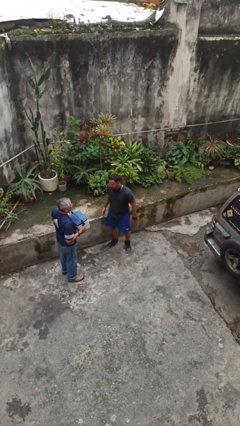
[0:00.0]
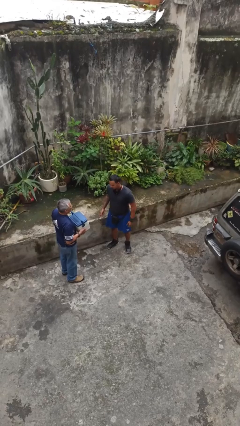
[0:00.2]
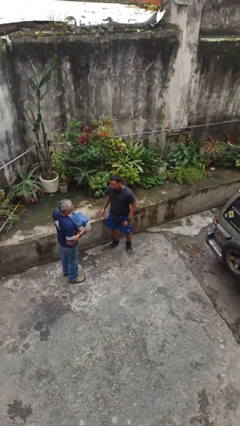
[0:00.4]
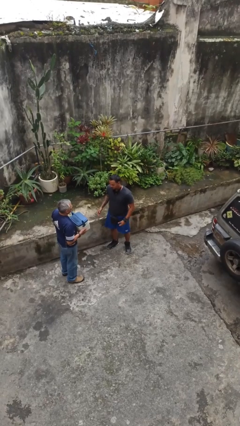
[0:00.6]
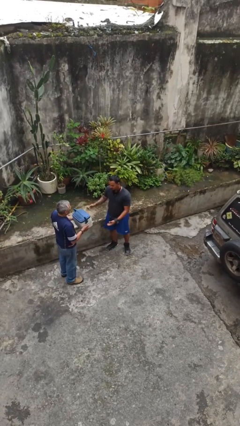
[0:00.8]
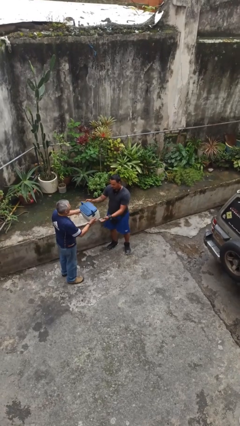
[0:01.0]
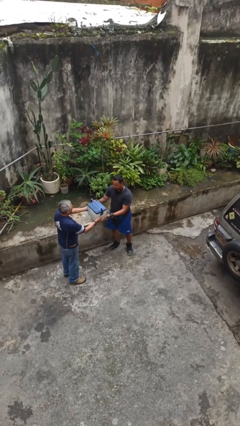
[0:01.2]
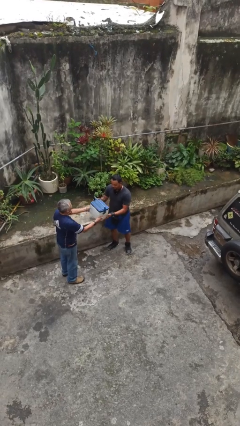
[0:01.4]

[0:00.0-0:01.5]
person transfers object to person

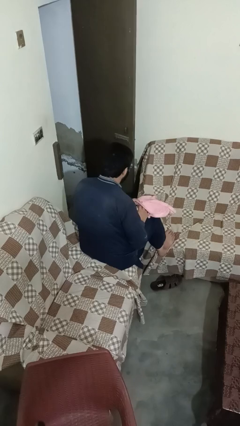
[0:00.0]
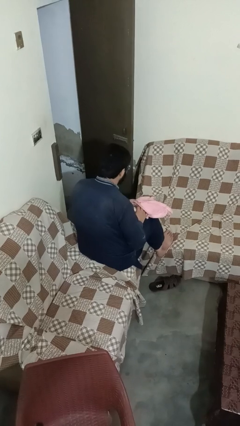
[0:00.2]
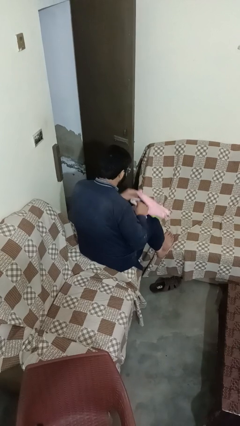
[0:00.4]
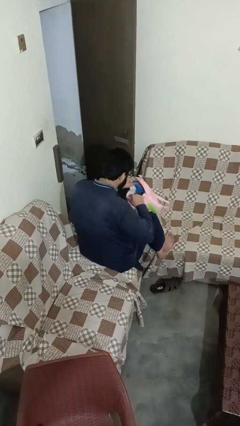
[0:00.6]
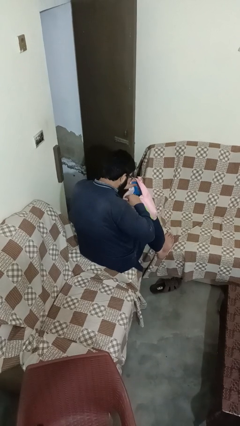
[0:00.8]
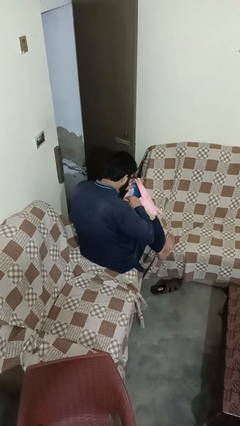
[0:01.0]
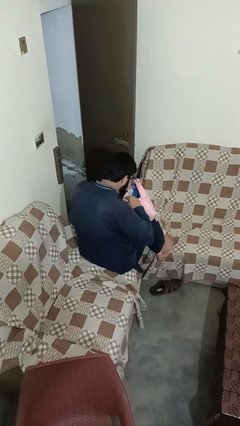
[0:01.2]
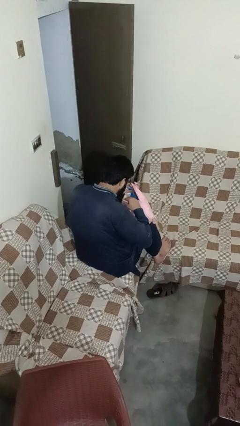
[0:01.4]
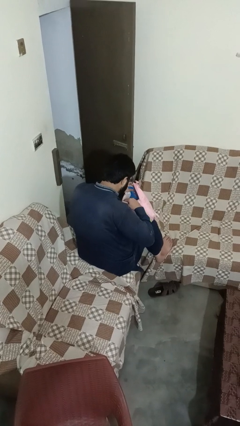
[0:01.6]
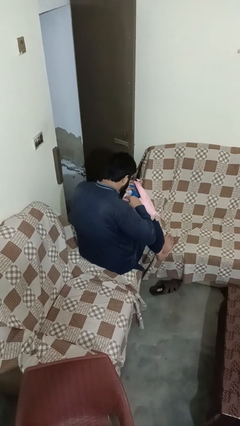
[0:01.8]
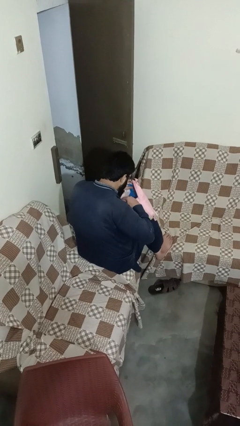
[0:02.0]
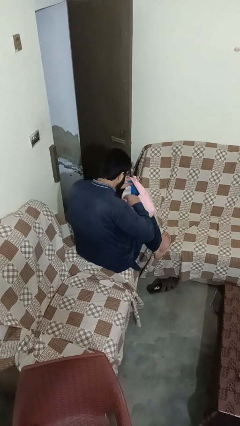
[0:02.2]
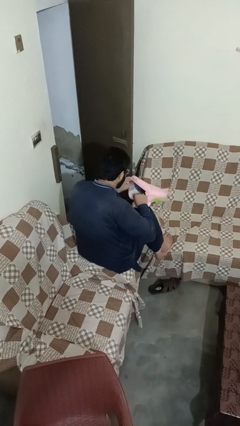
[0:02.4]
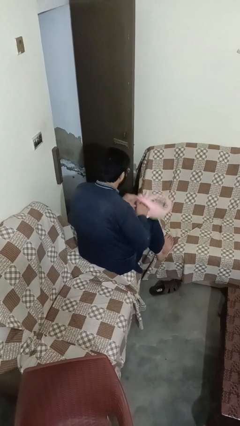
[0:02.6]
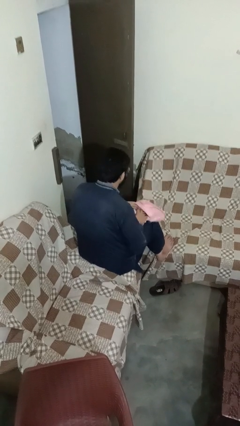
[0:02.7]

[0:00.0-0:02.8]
person searches in bag

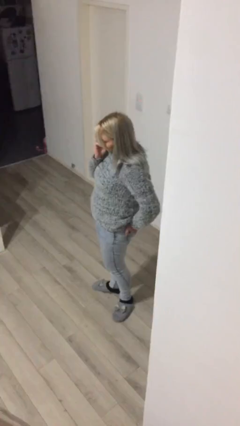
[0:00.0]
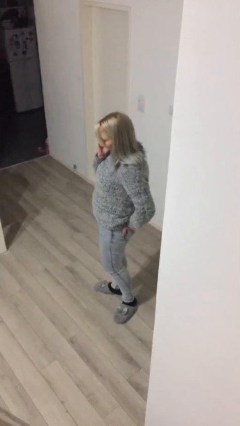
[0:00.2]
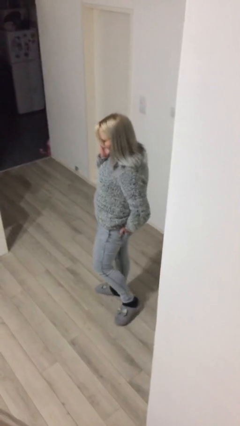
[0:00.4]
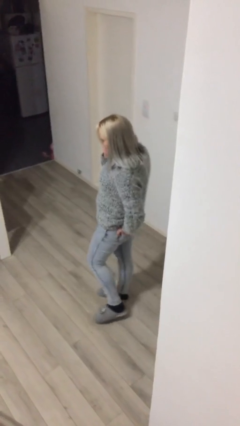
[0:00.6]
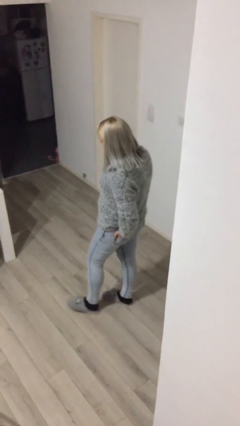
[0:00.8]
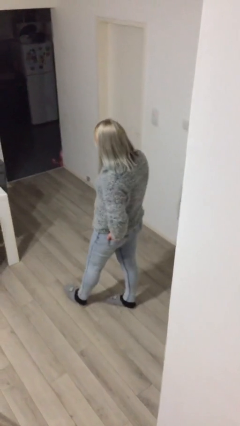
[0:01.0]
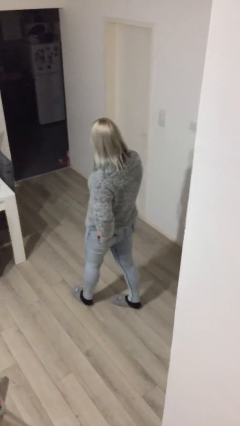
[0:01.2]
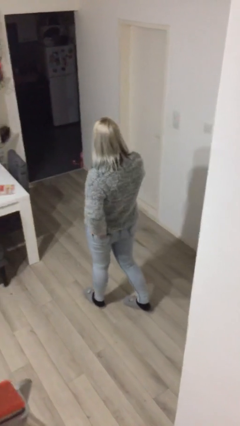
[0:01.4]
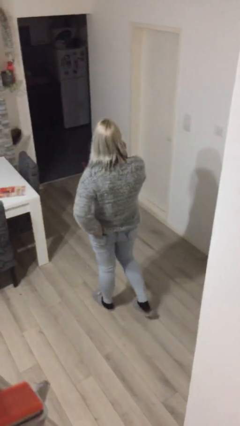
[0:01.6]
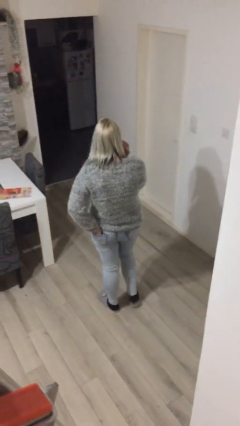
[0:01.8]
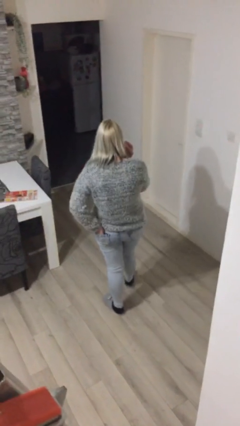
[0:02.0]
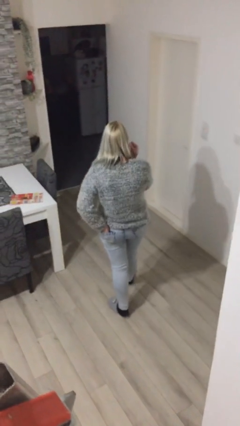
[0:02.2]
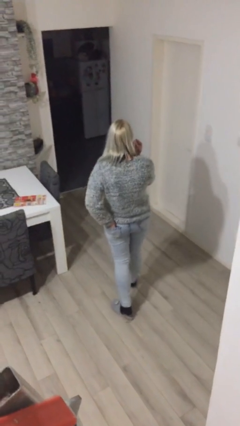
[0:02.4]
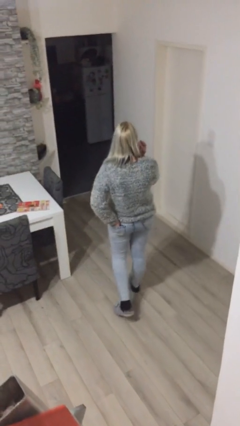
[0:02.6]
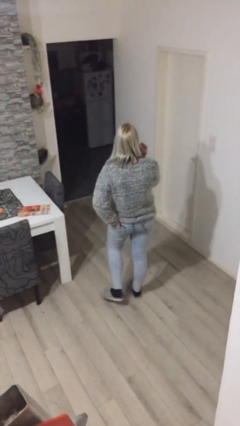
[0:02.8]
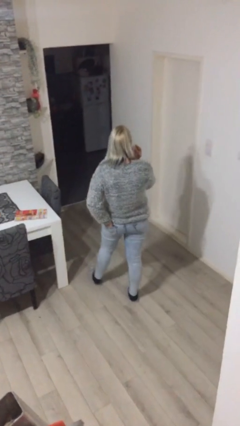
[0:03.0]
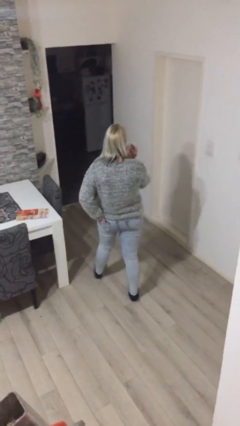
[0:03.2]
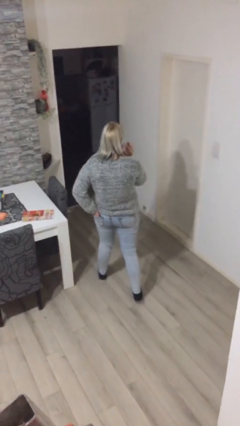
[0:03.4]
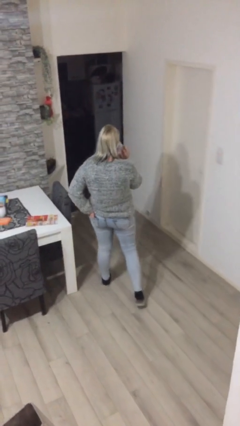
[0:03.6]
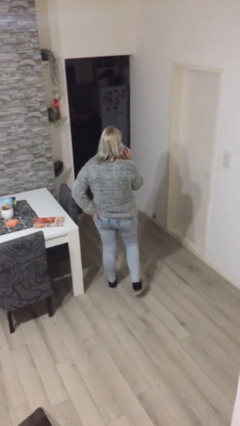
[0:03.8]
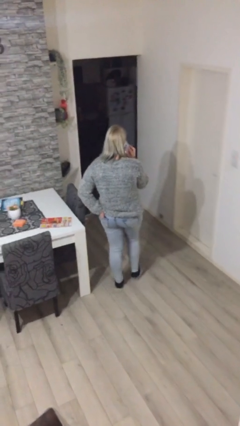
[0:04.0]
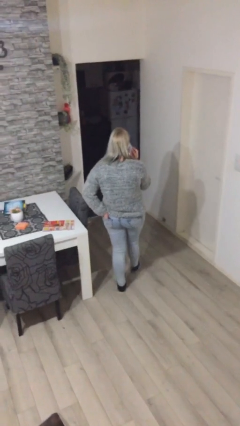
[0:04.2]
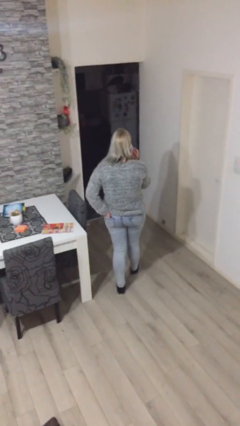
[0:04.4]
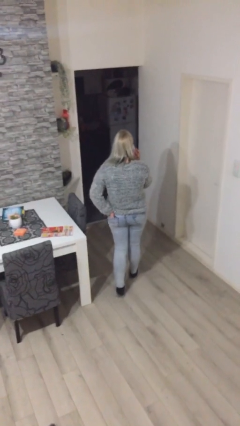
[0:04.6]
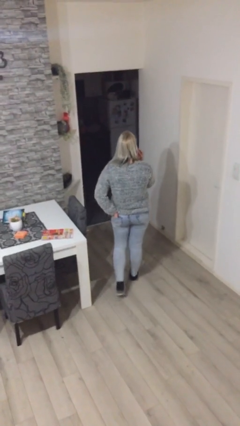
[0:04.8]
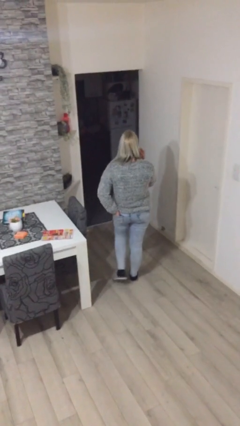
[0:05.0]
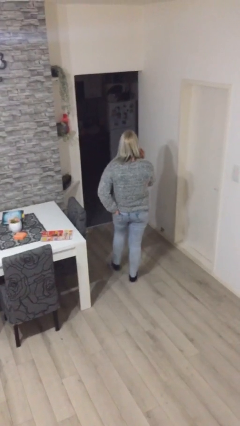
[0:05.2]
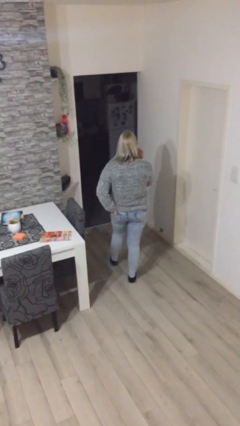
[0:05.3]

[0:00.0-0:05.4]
person talks on phone

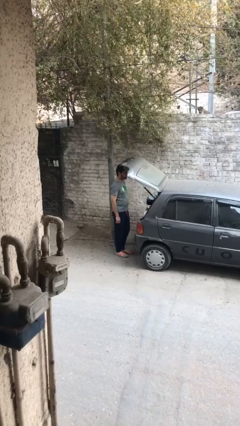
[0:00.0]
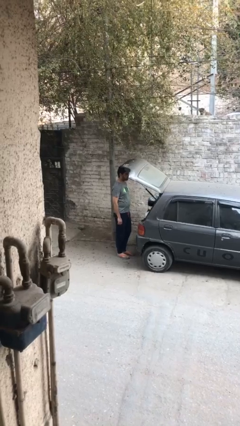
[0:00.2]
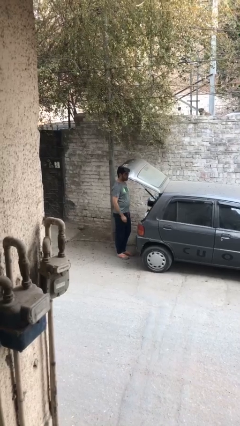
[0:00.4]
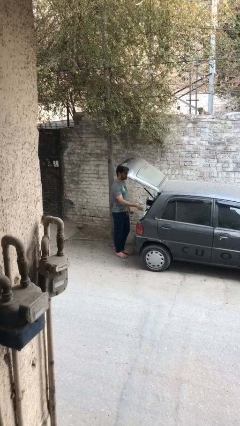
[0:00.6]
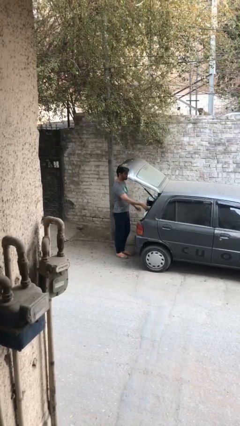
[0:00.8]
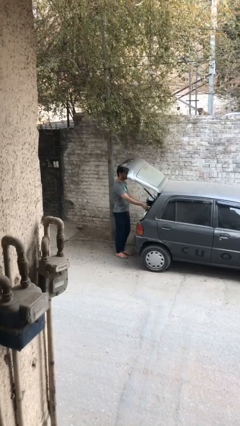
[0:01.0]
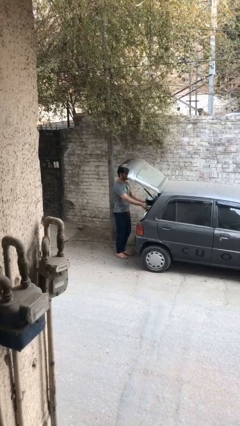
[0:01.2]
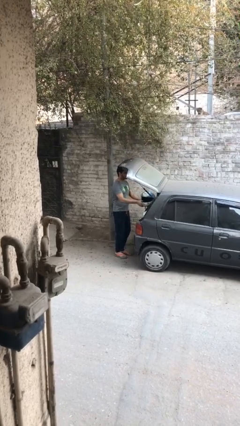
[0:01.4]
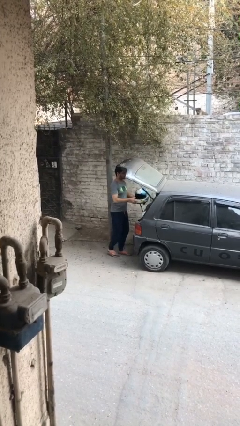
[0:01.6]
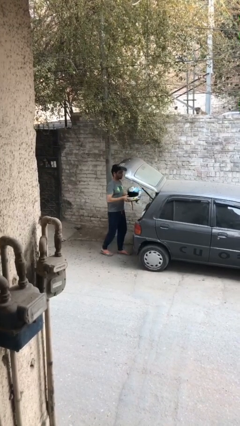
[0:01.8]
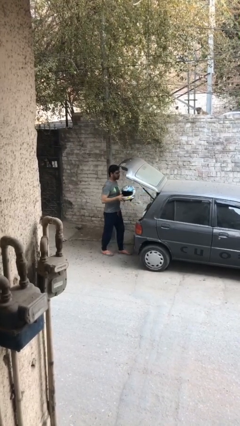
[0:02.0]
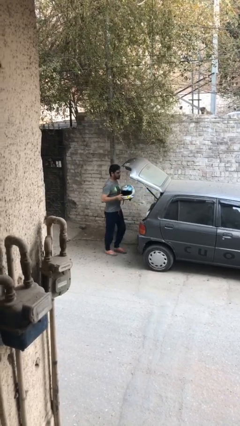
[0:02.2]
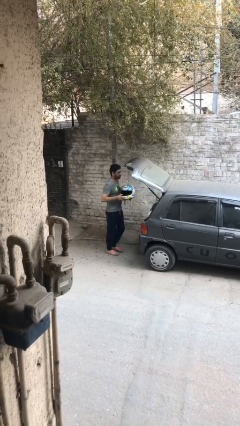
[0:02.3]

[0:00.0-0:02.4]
person unloads car

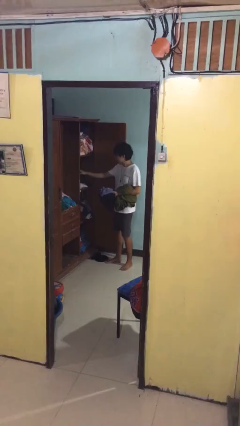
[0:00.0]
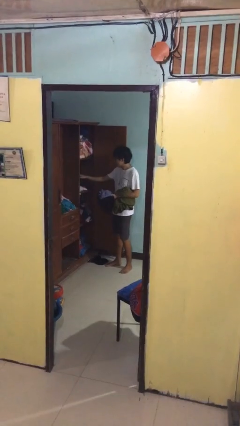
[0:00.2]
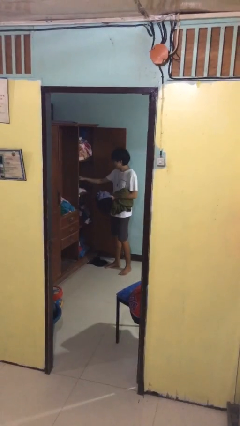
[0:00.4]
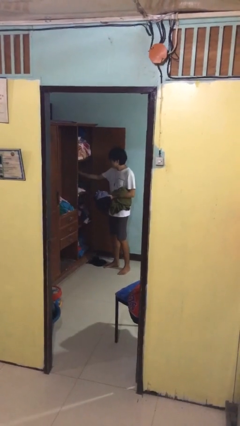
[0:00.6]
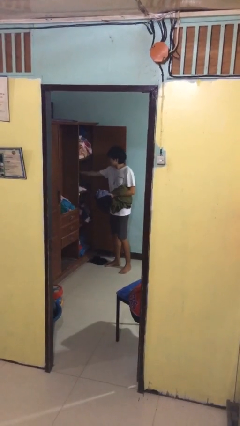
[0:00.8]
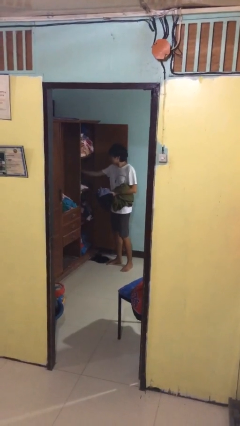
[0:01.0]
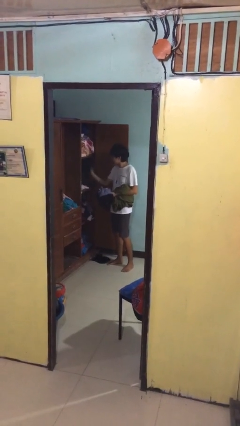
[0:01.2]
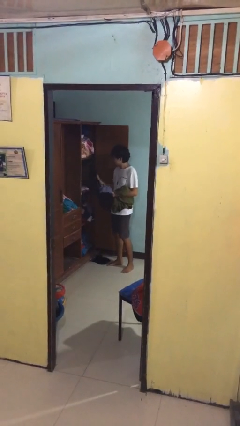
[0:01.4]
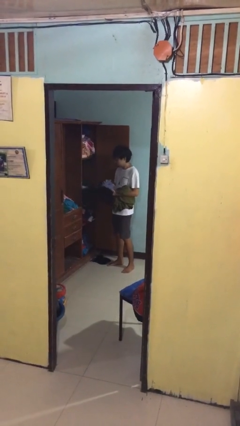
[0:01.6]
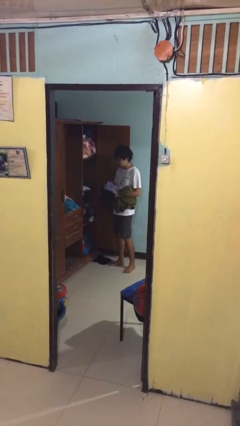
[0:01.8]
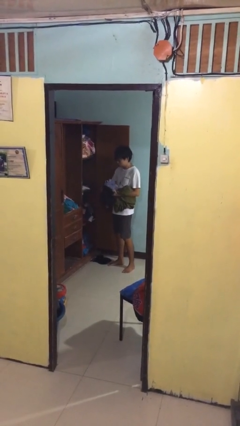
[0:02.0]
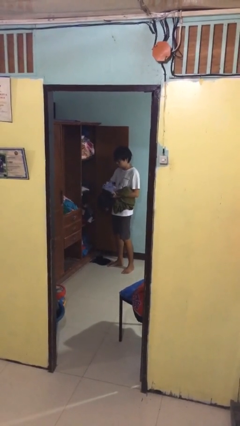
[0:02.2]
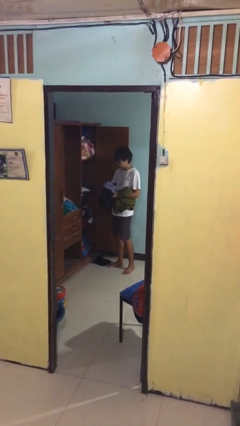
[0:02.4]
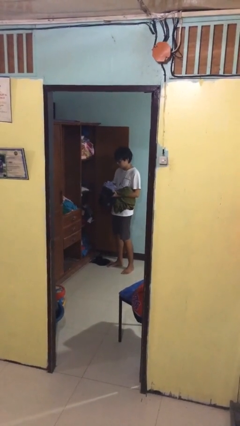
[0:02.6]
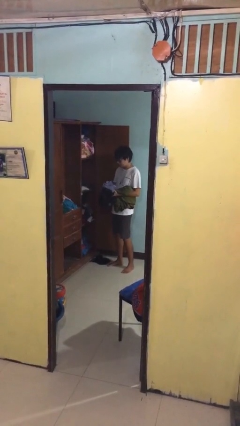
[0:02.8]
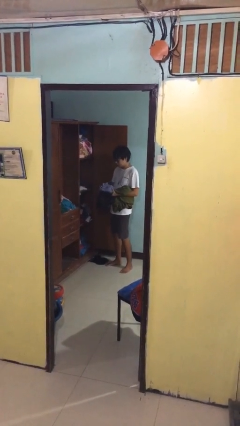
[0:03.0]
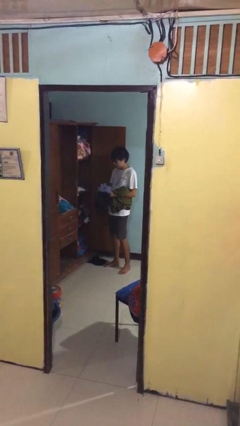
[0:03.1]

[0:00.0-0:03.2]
person takes clothes from dresser

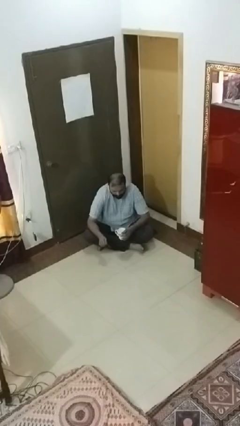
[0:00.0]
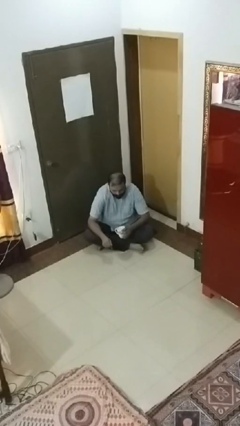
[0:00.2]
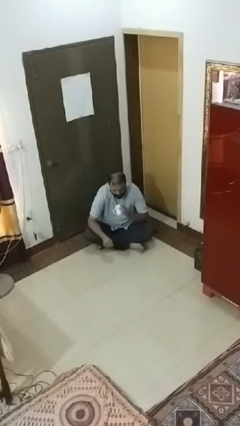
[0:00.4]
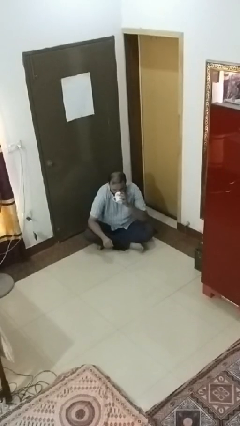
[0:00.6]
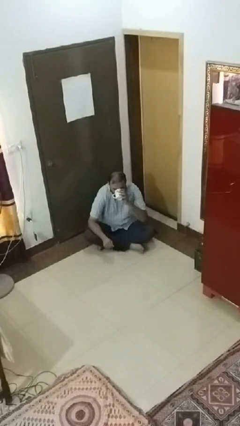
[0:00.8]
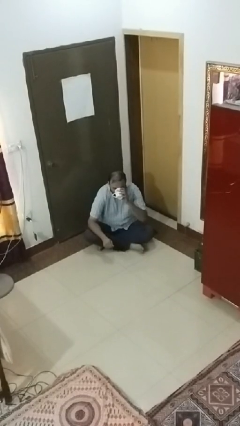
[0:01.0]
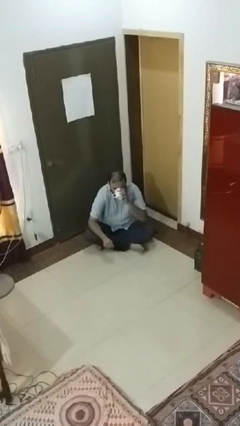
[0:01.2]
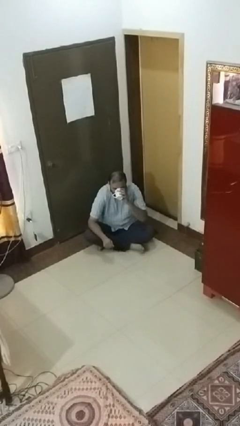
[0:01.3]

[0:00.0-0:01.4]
person drinks from mug

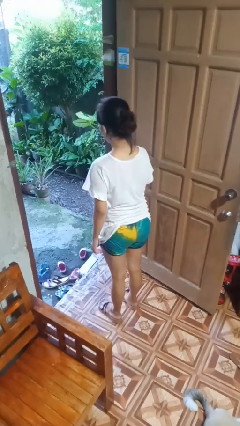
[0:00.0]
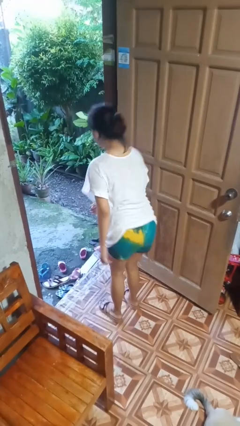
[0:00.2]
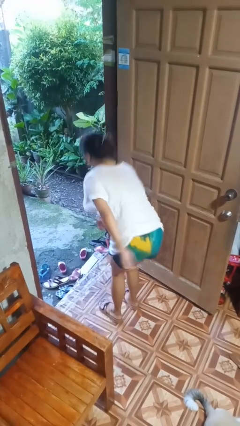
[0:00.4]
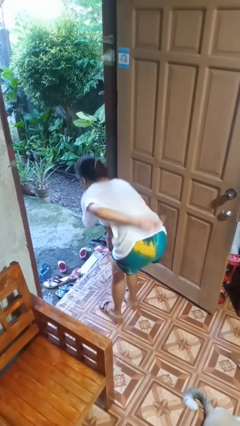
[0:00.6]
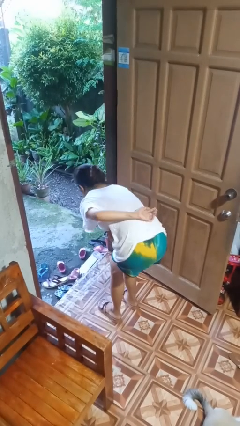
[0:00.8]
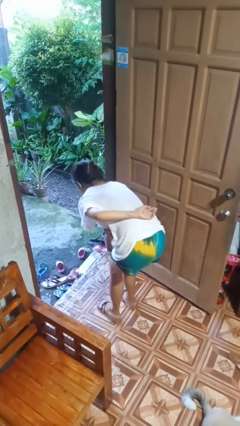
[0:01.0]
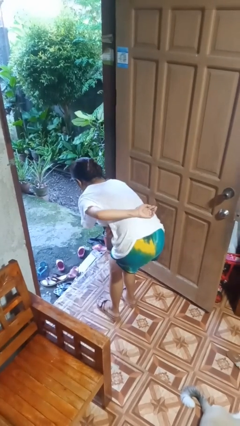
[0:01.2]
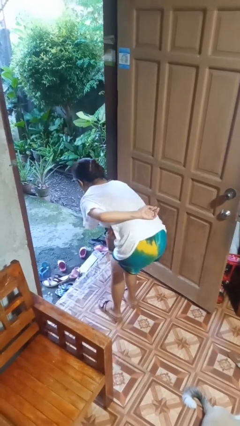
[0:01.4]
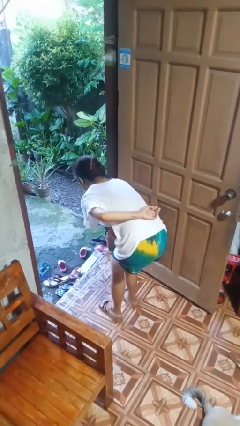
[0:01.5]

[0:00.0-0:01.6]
person bows
